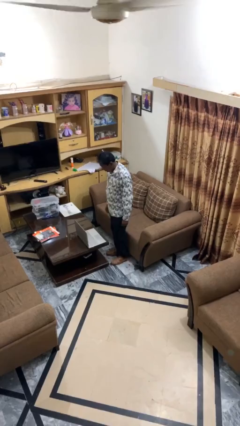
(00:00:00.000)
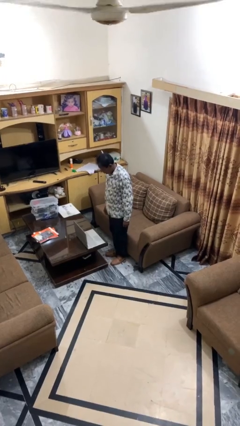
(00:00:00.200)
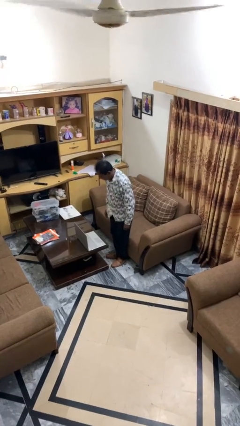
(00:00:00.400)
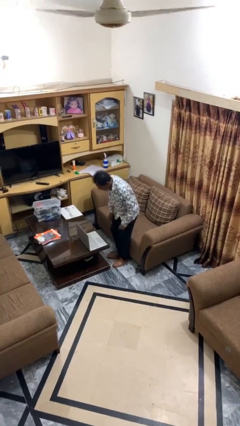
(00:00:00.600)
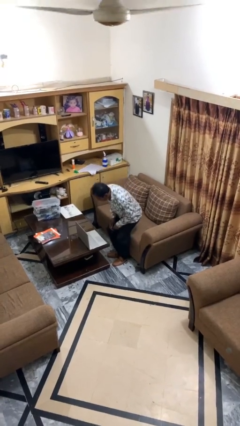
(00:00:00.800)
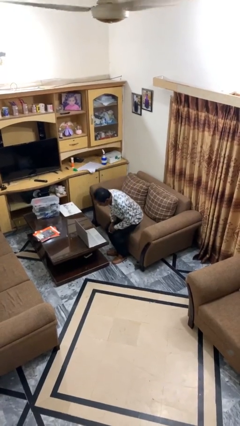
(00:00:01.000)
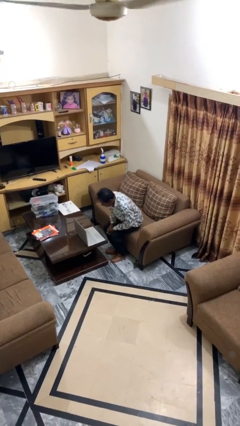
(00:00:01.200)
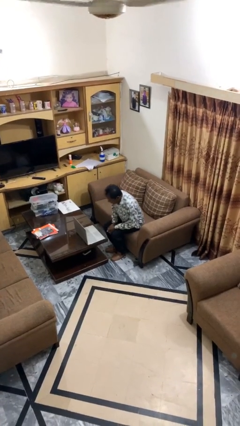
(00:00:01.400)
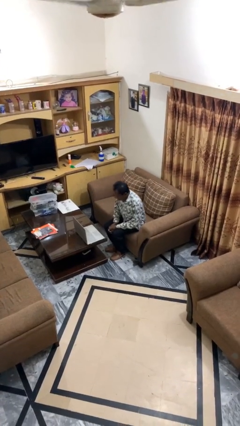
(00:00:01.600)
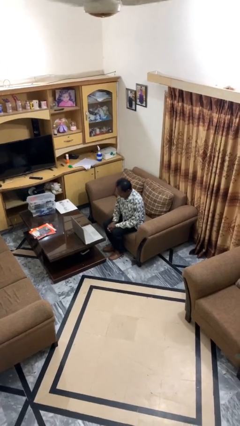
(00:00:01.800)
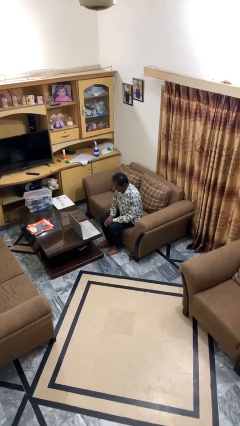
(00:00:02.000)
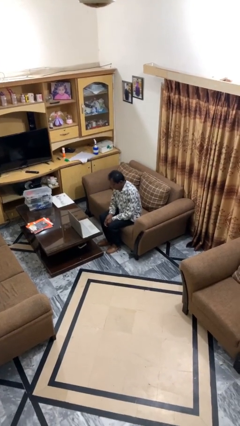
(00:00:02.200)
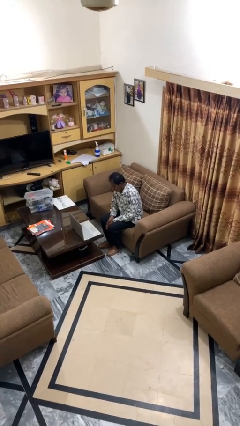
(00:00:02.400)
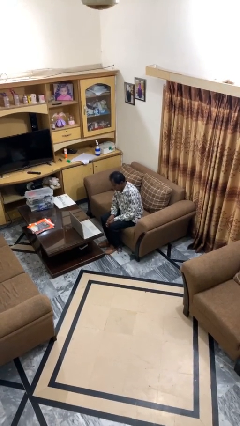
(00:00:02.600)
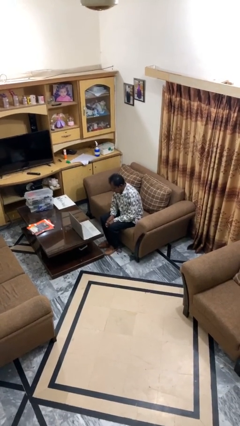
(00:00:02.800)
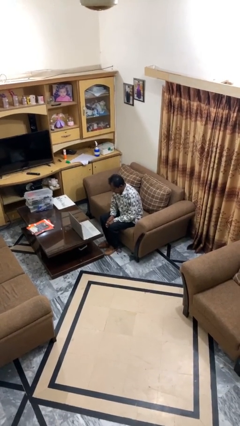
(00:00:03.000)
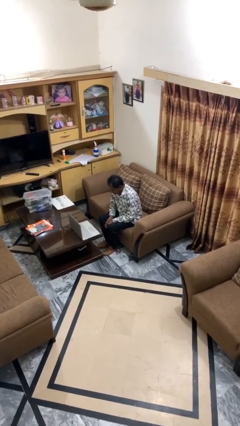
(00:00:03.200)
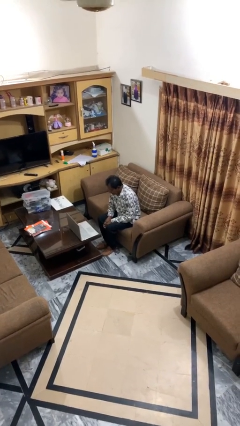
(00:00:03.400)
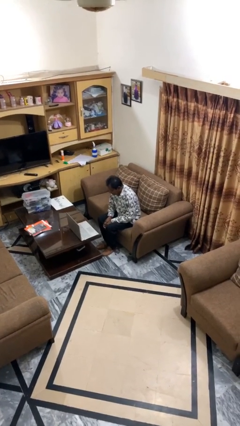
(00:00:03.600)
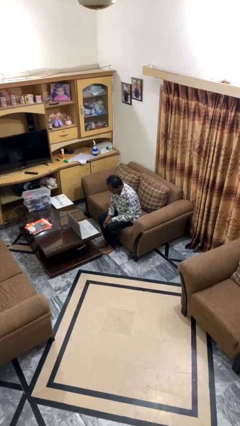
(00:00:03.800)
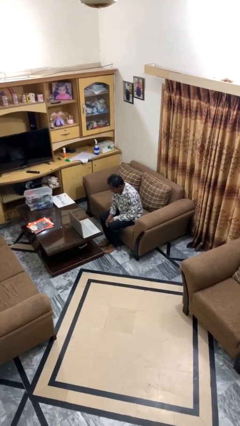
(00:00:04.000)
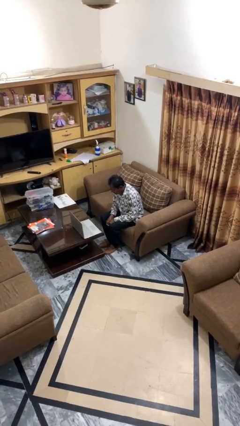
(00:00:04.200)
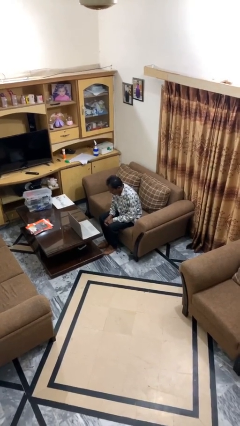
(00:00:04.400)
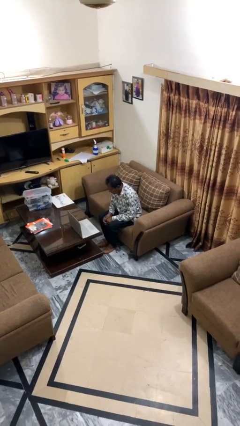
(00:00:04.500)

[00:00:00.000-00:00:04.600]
person sits down

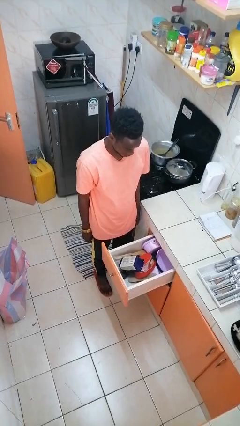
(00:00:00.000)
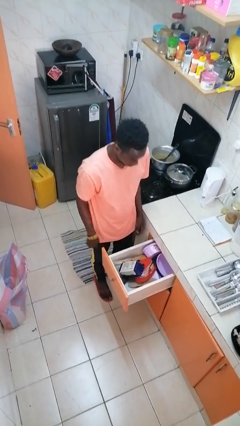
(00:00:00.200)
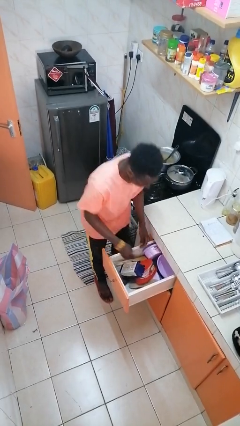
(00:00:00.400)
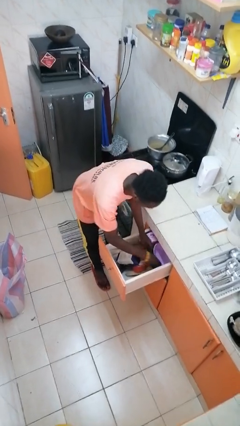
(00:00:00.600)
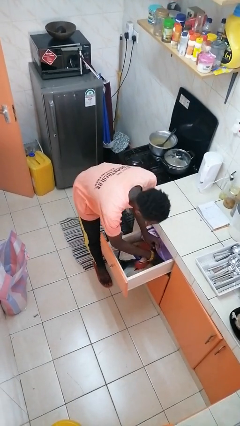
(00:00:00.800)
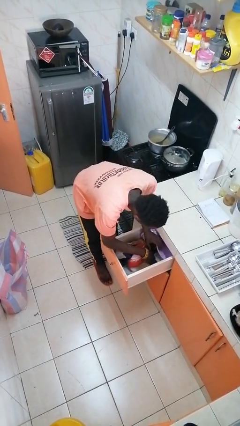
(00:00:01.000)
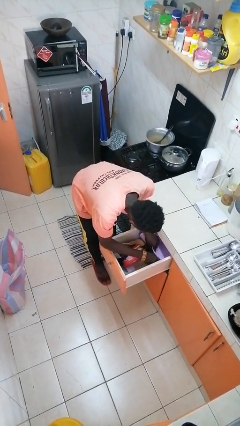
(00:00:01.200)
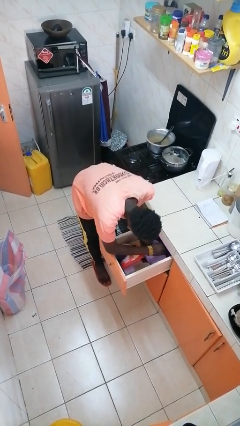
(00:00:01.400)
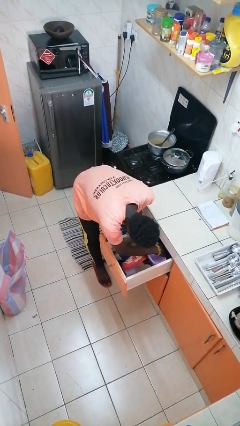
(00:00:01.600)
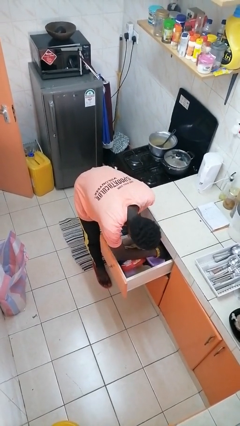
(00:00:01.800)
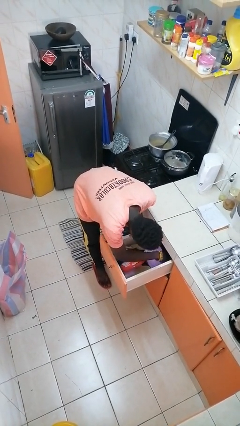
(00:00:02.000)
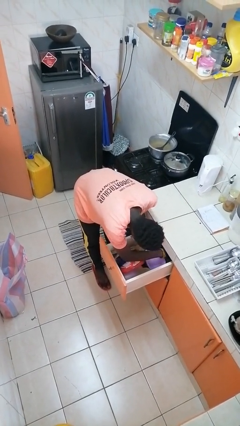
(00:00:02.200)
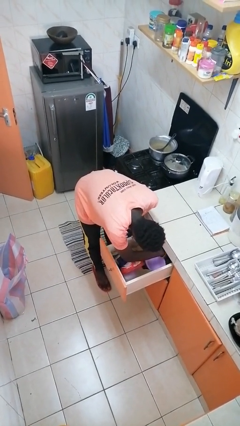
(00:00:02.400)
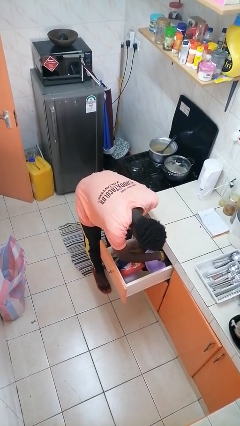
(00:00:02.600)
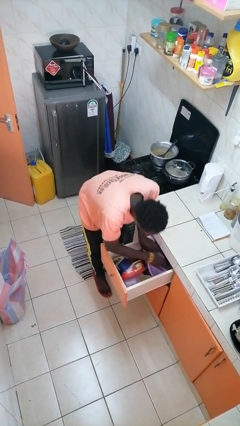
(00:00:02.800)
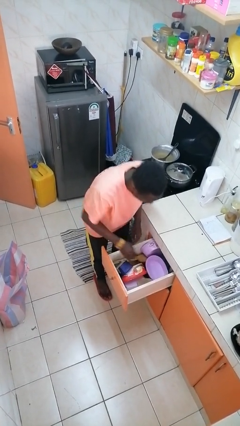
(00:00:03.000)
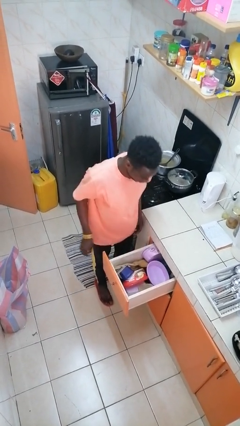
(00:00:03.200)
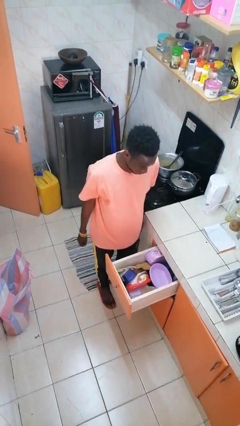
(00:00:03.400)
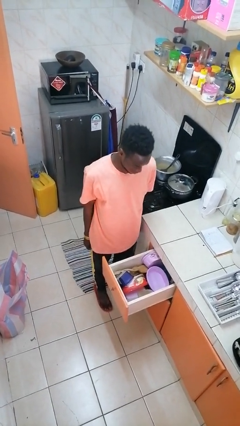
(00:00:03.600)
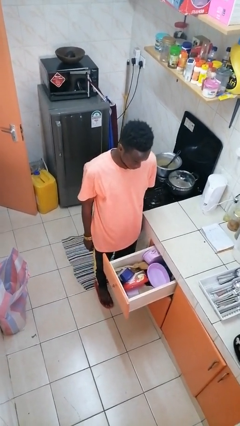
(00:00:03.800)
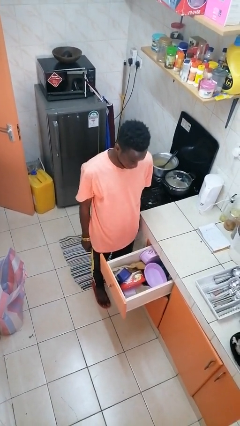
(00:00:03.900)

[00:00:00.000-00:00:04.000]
person searches in kitchen drawer

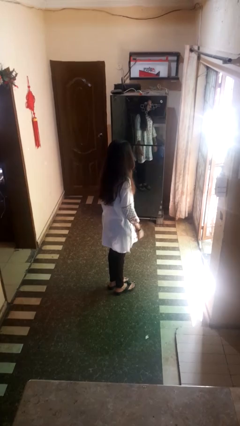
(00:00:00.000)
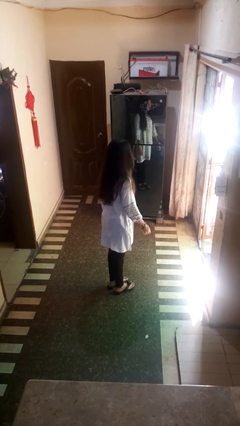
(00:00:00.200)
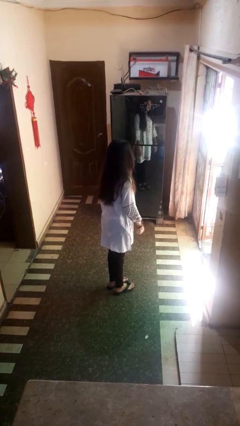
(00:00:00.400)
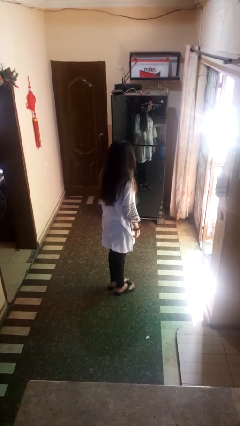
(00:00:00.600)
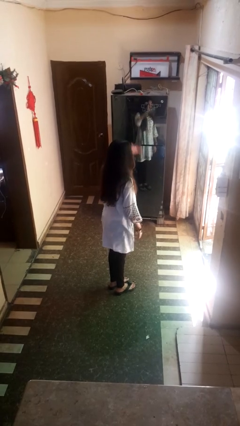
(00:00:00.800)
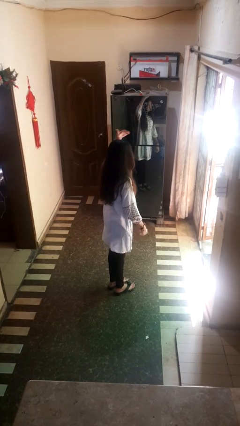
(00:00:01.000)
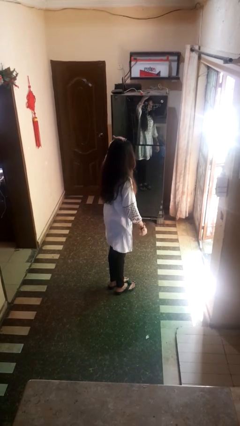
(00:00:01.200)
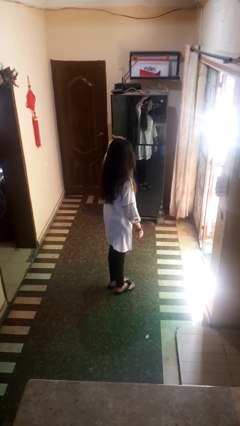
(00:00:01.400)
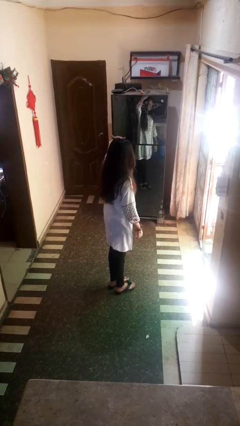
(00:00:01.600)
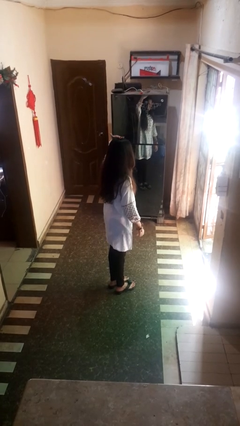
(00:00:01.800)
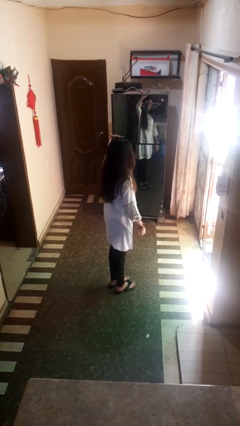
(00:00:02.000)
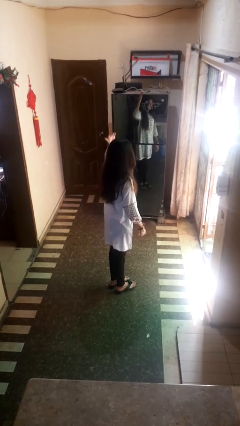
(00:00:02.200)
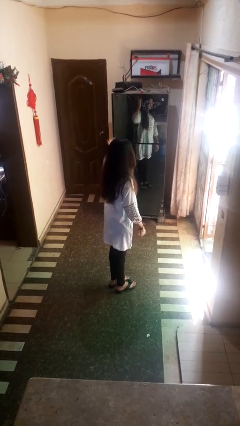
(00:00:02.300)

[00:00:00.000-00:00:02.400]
person pats head

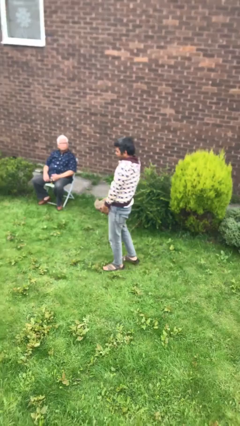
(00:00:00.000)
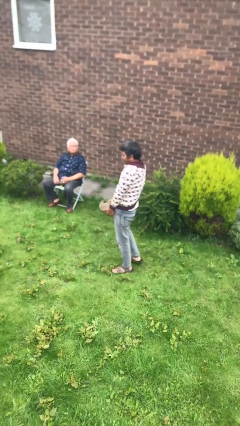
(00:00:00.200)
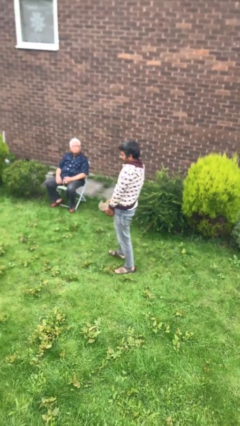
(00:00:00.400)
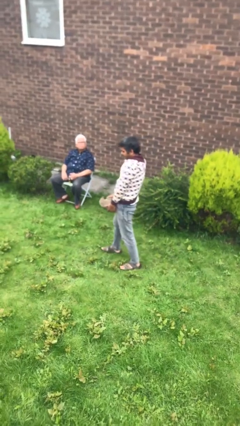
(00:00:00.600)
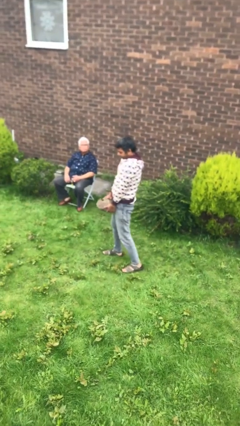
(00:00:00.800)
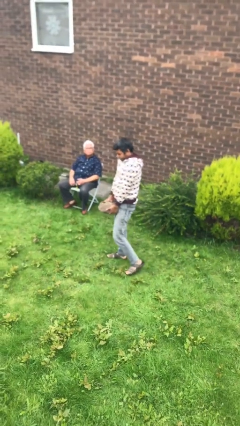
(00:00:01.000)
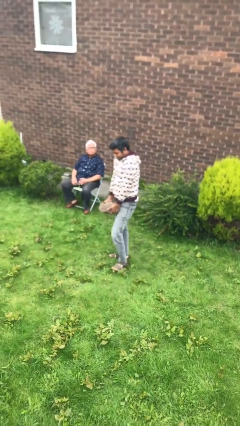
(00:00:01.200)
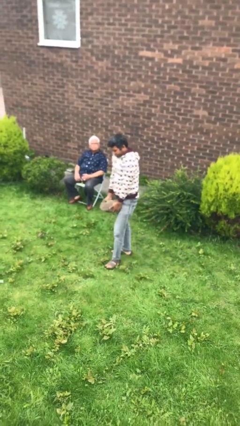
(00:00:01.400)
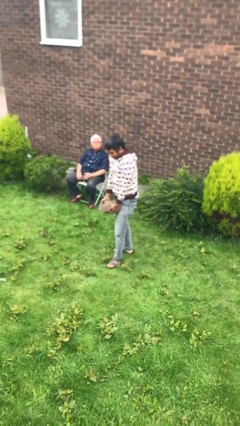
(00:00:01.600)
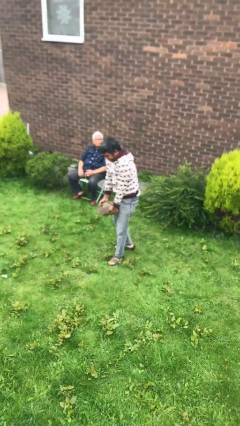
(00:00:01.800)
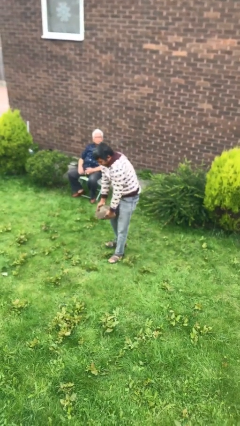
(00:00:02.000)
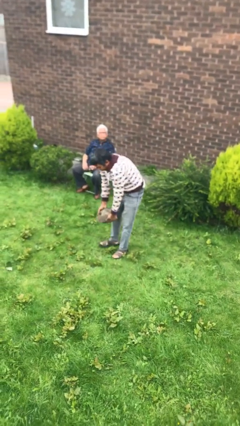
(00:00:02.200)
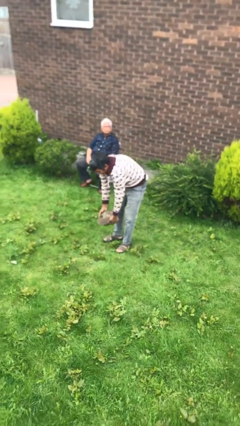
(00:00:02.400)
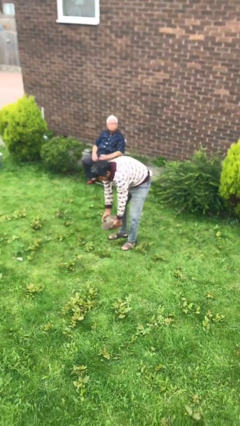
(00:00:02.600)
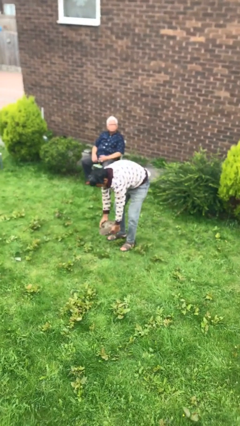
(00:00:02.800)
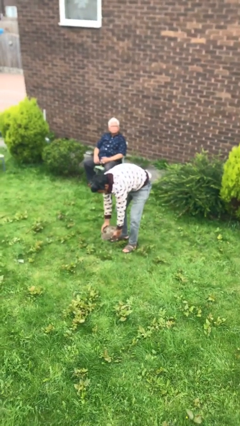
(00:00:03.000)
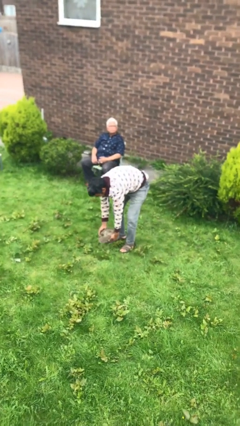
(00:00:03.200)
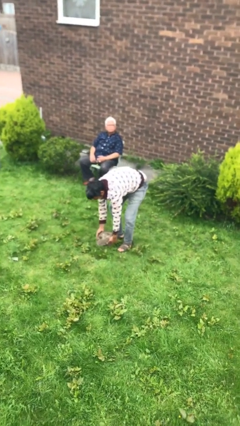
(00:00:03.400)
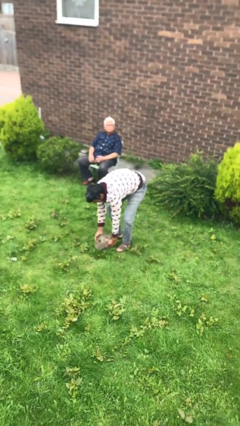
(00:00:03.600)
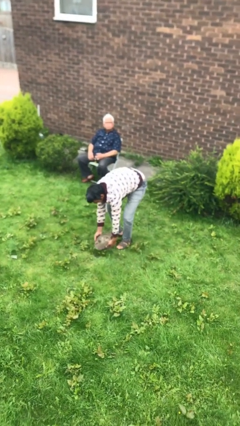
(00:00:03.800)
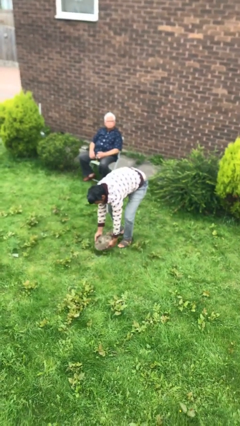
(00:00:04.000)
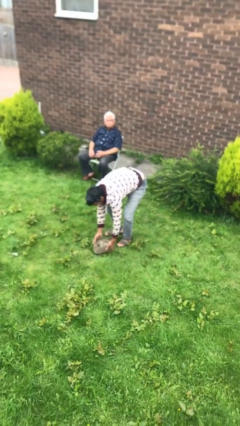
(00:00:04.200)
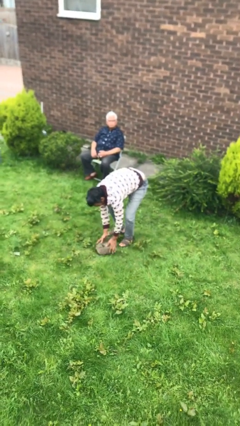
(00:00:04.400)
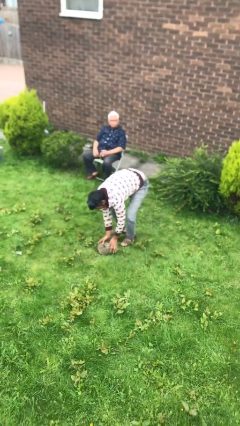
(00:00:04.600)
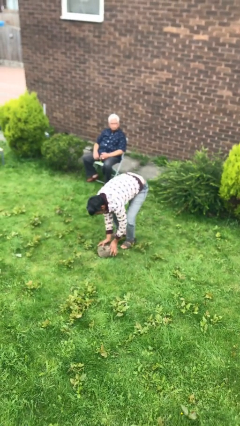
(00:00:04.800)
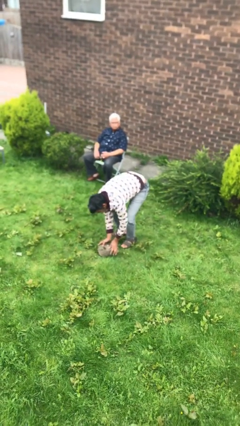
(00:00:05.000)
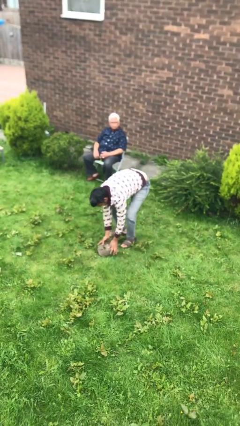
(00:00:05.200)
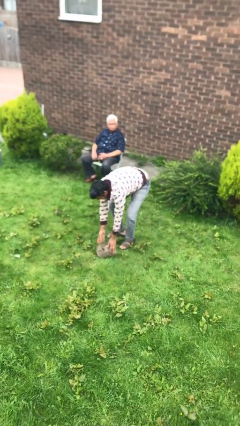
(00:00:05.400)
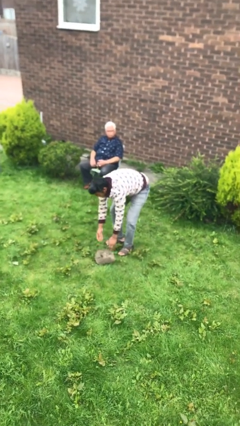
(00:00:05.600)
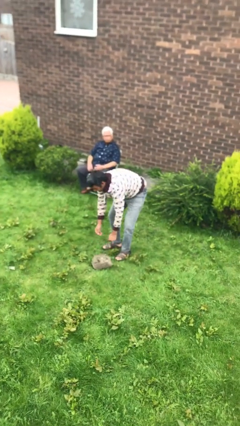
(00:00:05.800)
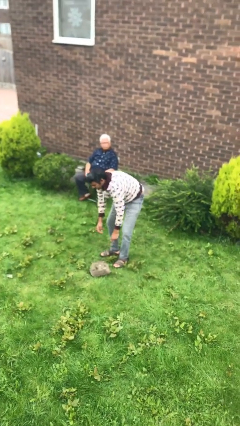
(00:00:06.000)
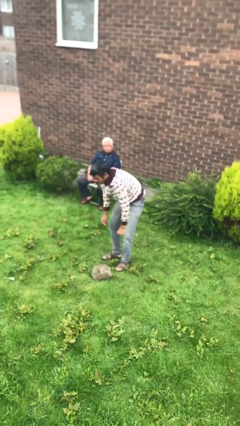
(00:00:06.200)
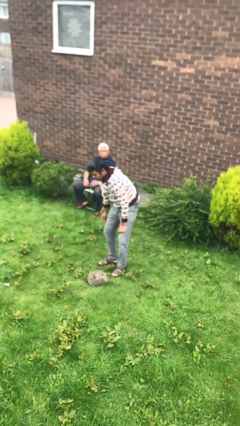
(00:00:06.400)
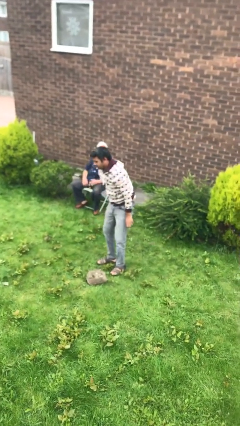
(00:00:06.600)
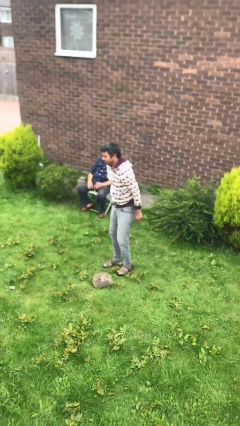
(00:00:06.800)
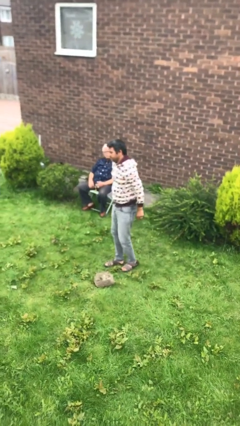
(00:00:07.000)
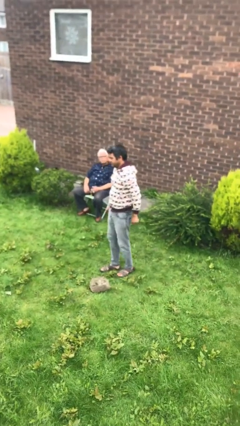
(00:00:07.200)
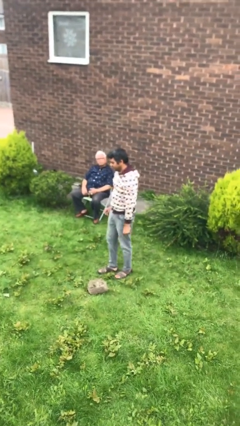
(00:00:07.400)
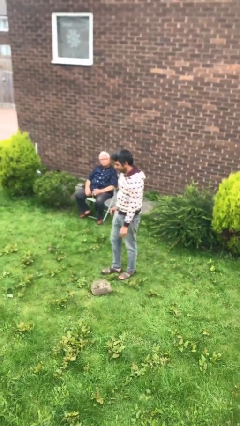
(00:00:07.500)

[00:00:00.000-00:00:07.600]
person puts down object on floor
